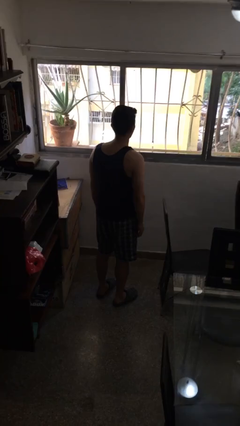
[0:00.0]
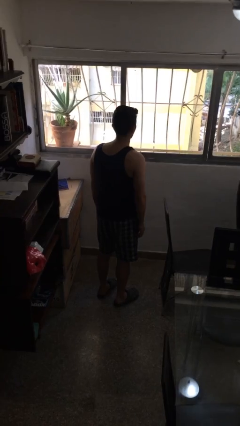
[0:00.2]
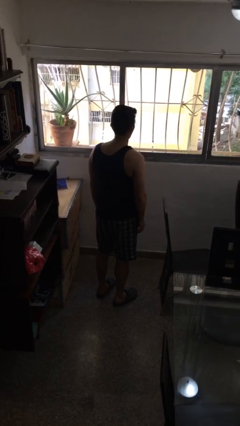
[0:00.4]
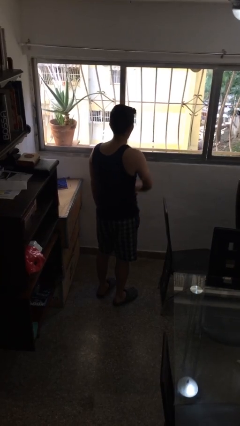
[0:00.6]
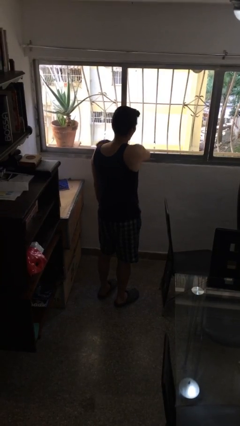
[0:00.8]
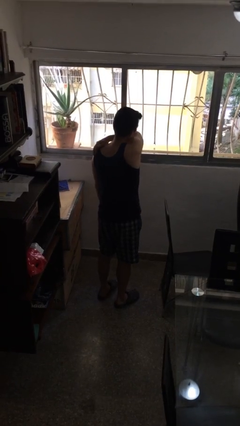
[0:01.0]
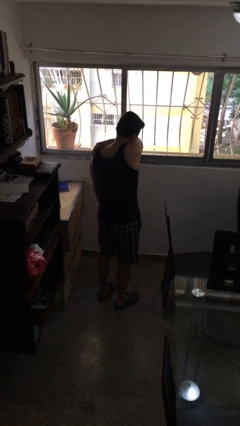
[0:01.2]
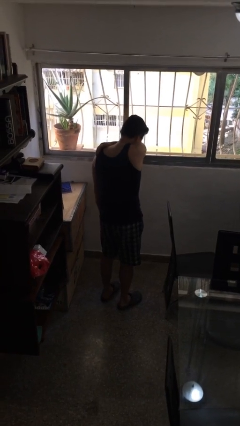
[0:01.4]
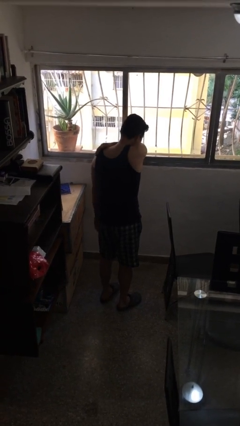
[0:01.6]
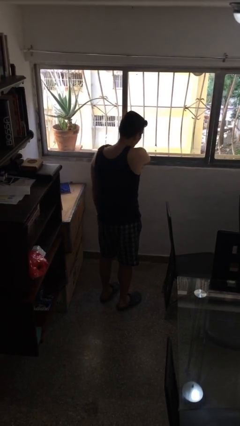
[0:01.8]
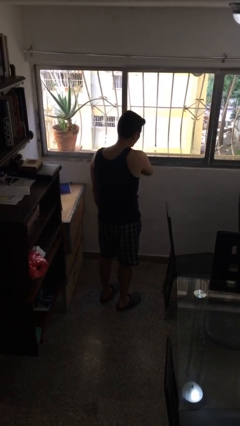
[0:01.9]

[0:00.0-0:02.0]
person sneezes into arm

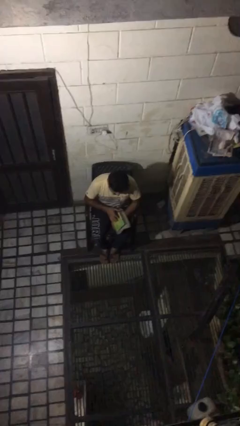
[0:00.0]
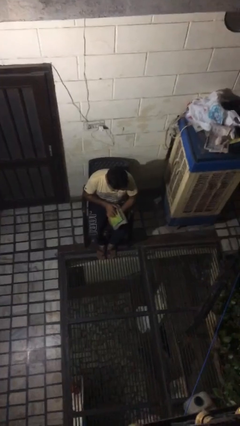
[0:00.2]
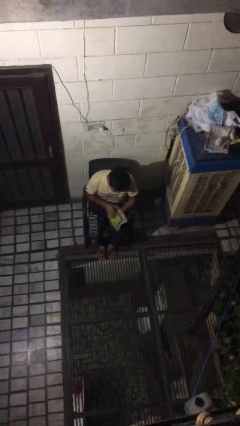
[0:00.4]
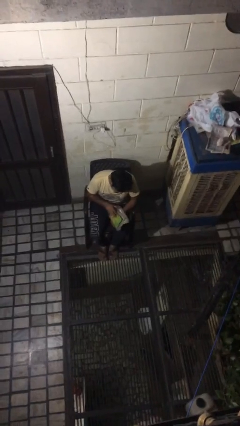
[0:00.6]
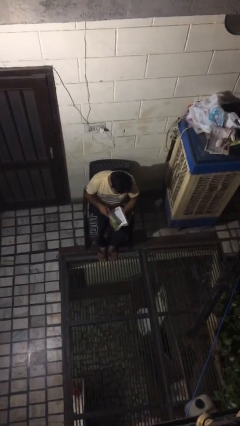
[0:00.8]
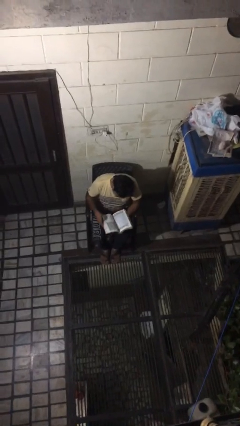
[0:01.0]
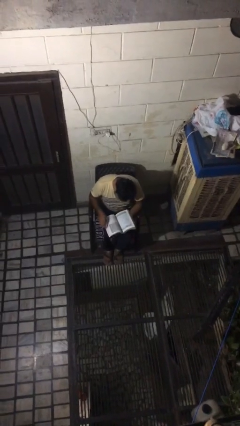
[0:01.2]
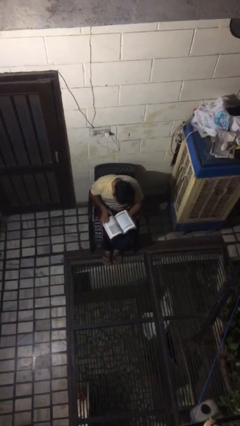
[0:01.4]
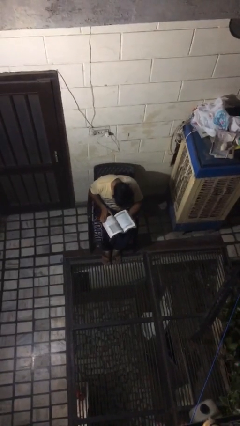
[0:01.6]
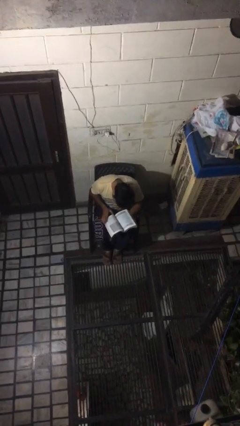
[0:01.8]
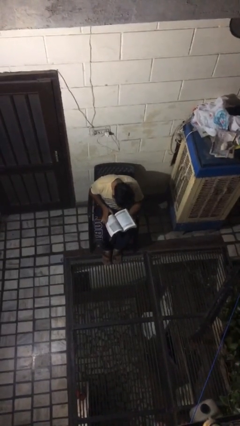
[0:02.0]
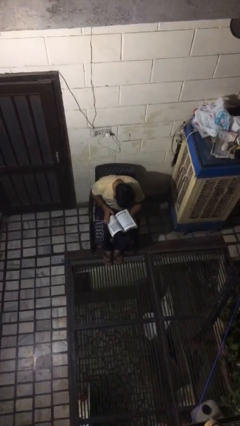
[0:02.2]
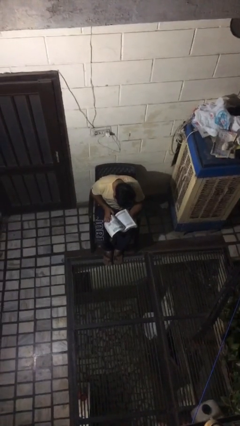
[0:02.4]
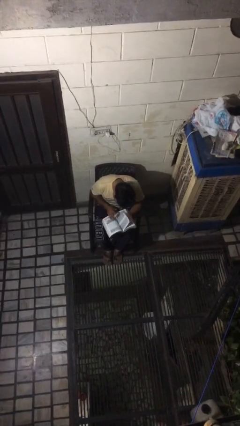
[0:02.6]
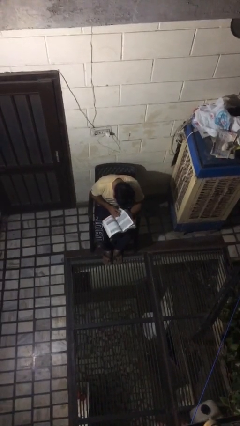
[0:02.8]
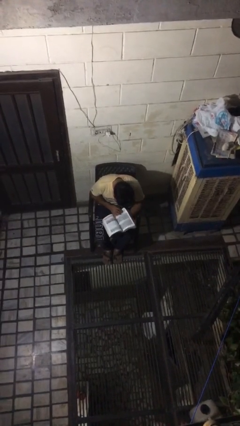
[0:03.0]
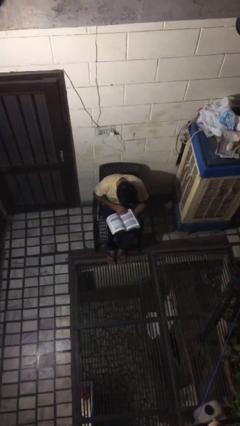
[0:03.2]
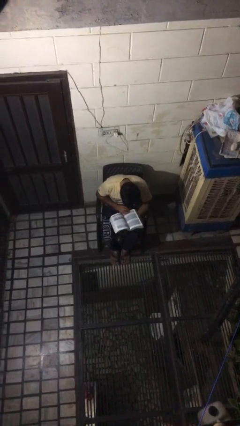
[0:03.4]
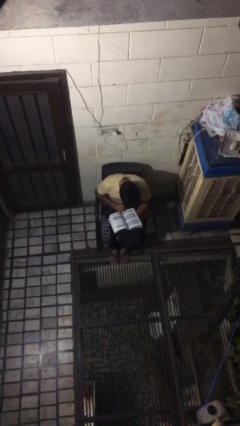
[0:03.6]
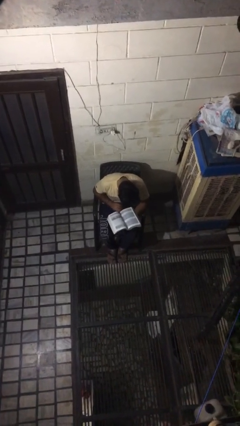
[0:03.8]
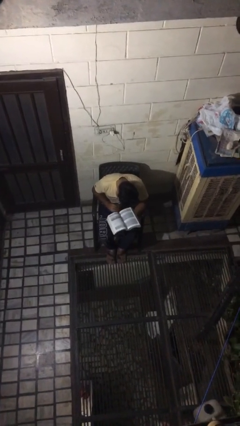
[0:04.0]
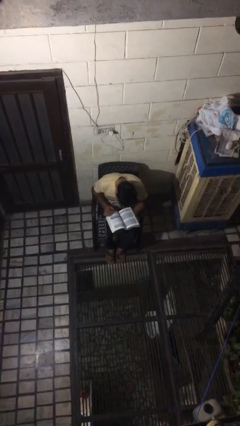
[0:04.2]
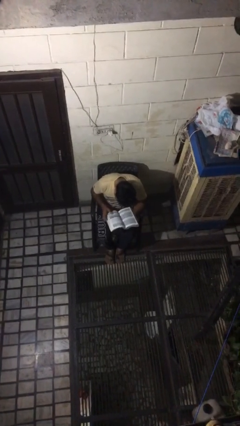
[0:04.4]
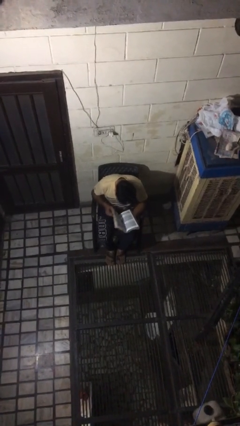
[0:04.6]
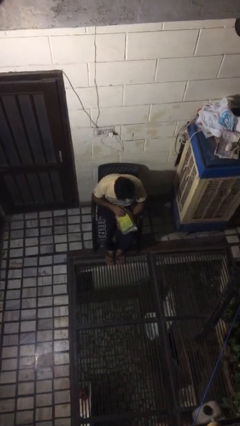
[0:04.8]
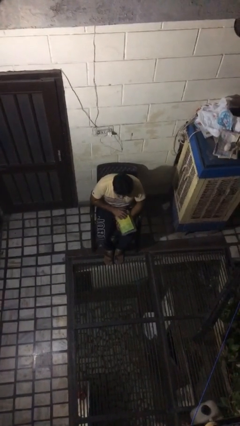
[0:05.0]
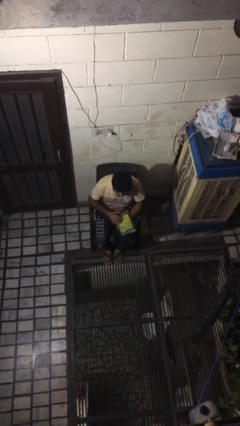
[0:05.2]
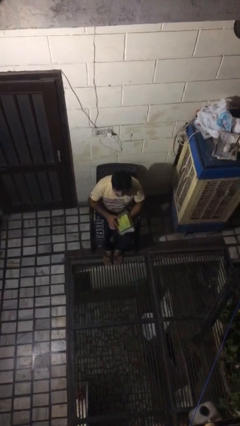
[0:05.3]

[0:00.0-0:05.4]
person reads book

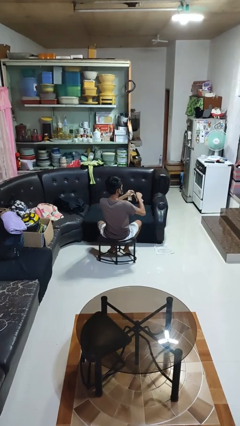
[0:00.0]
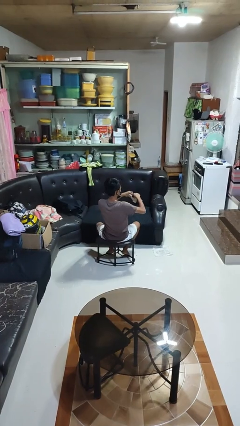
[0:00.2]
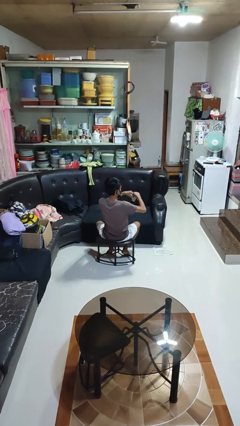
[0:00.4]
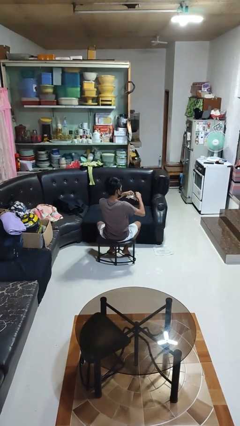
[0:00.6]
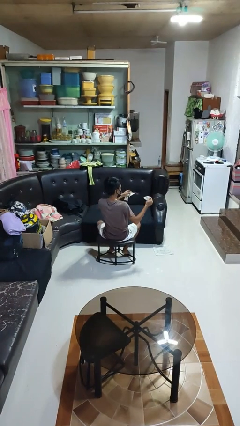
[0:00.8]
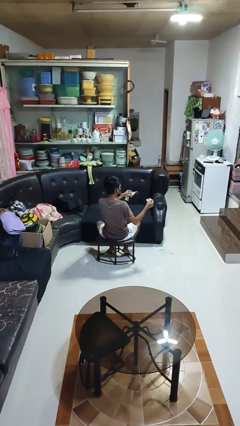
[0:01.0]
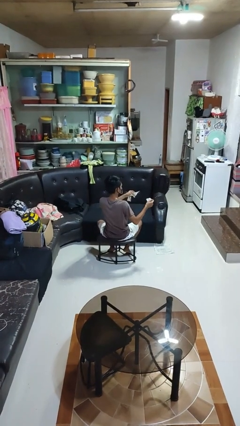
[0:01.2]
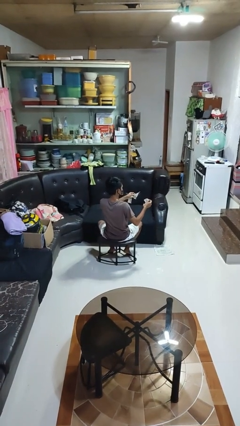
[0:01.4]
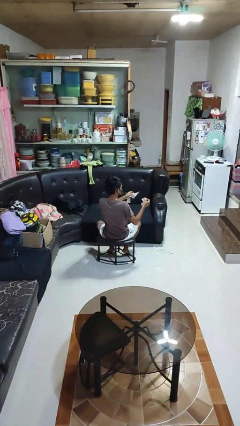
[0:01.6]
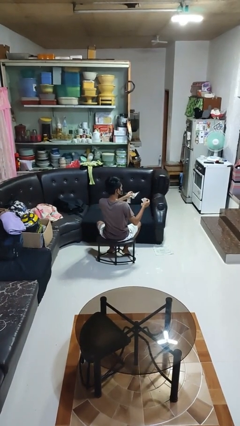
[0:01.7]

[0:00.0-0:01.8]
person tears paper

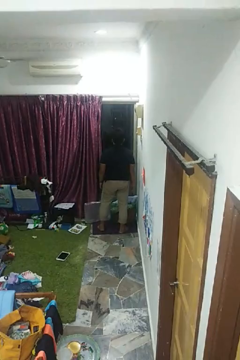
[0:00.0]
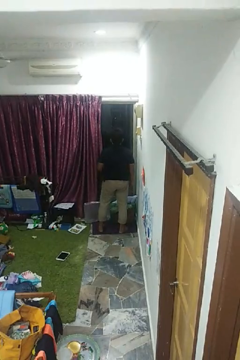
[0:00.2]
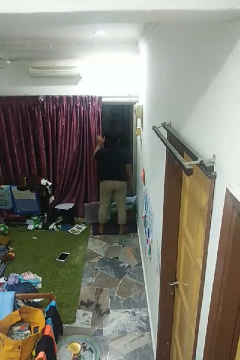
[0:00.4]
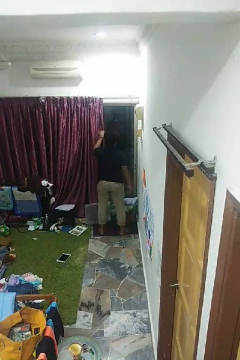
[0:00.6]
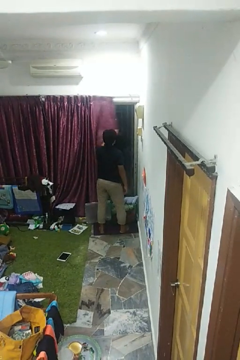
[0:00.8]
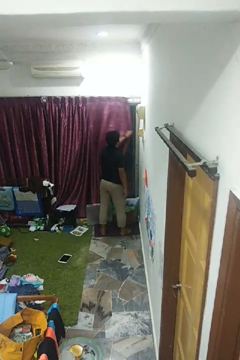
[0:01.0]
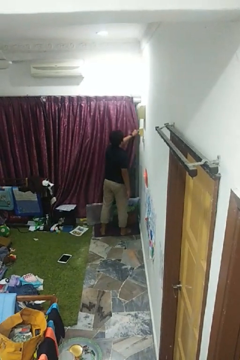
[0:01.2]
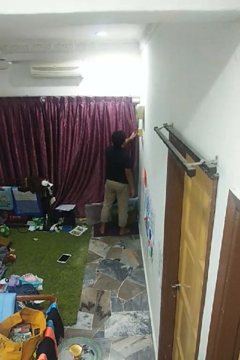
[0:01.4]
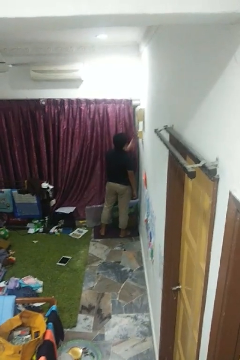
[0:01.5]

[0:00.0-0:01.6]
person closes curtains

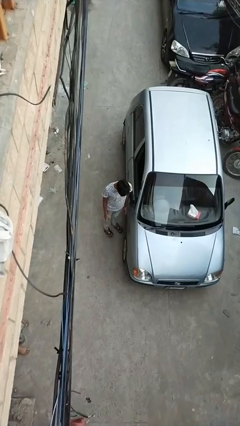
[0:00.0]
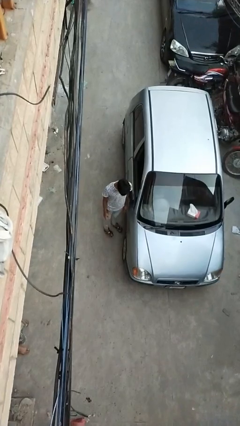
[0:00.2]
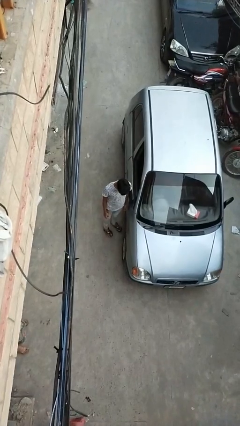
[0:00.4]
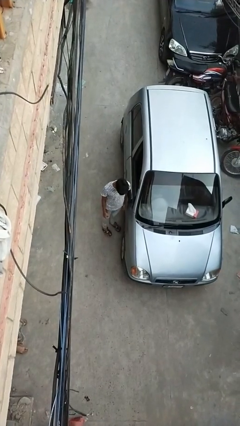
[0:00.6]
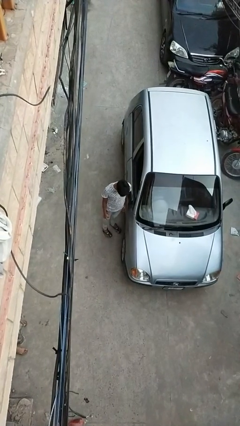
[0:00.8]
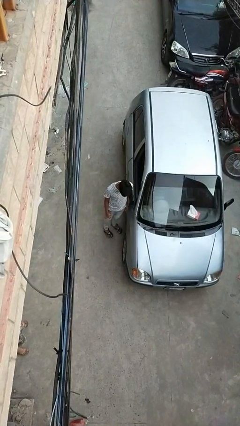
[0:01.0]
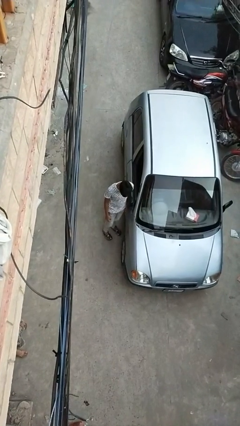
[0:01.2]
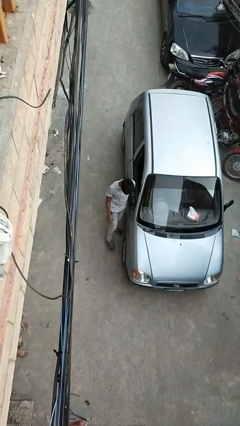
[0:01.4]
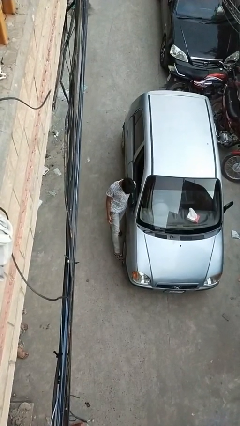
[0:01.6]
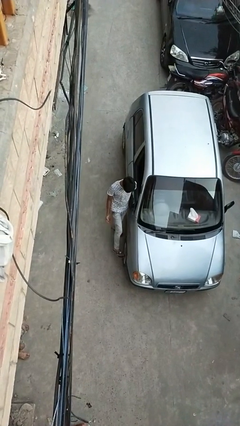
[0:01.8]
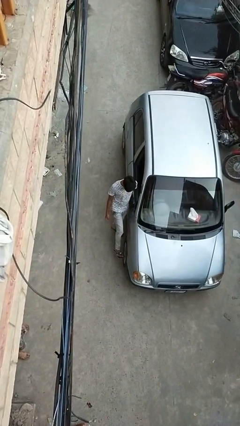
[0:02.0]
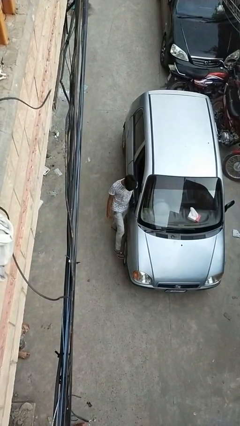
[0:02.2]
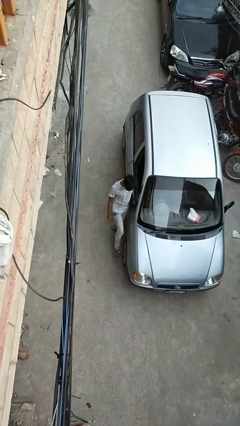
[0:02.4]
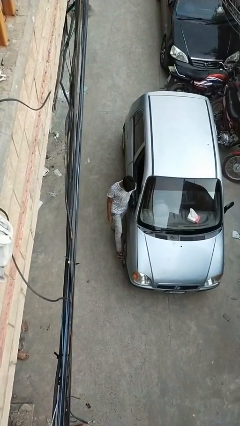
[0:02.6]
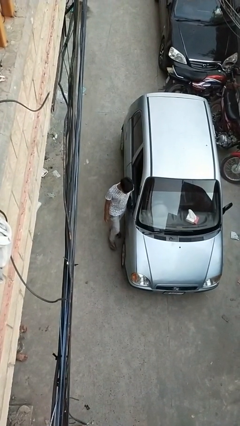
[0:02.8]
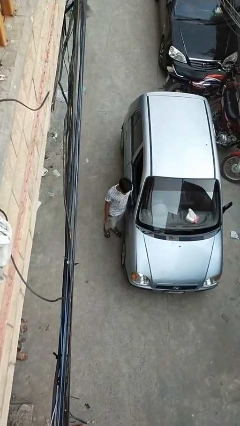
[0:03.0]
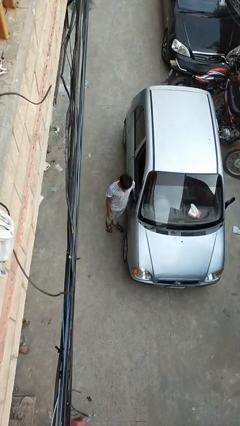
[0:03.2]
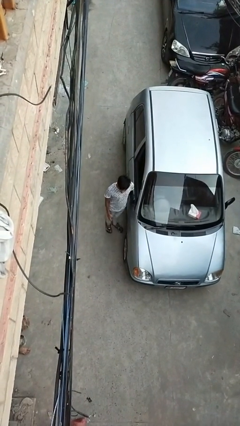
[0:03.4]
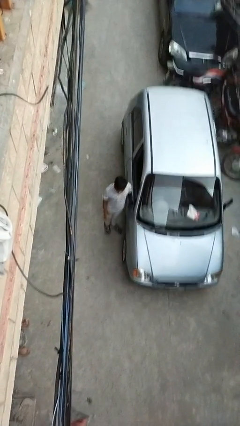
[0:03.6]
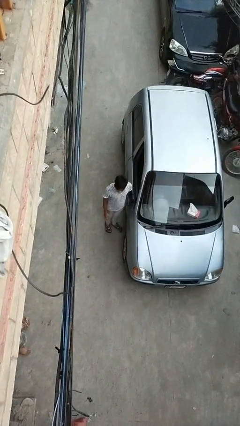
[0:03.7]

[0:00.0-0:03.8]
person kicks car tires

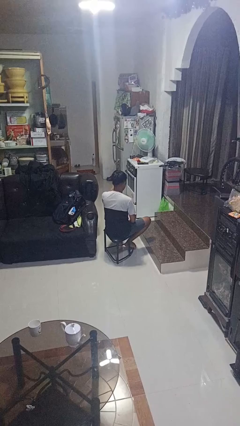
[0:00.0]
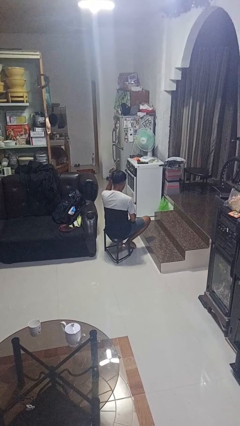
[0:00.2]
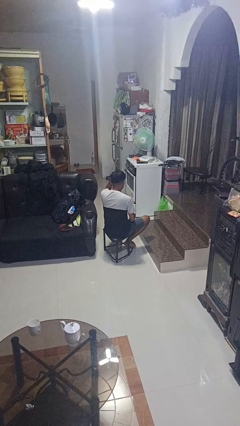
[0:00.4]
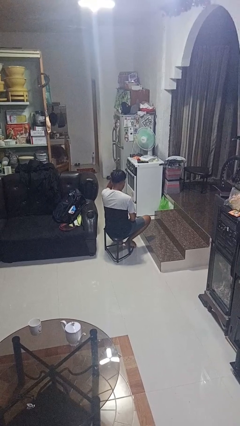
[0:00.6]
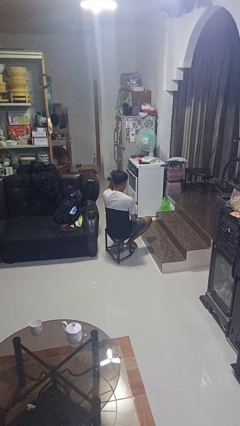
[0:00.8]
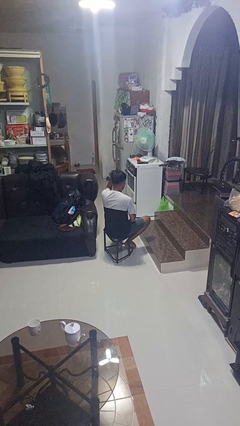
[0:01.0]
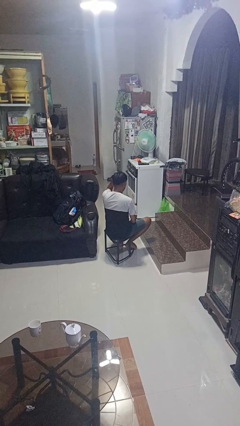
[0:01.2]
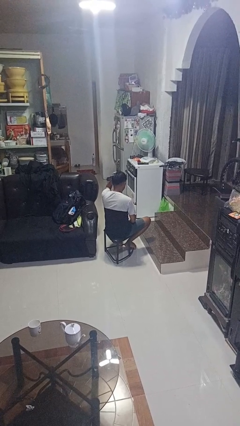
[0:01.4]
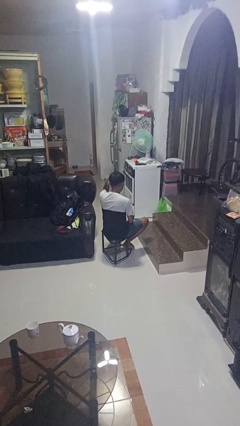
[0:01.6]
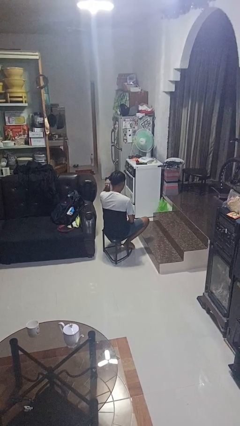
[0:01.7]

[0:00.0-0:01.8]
person pats head

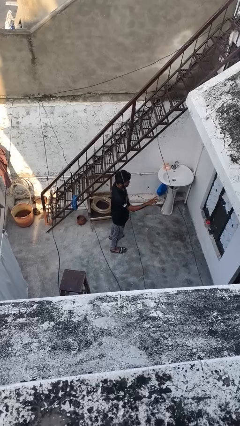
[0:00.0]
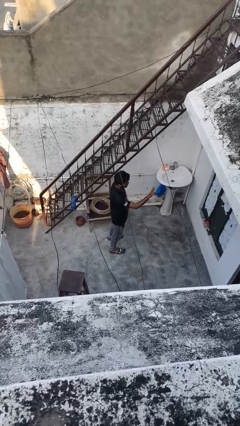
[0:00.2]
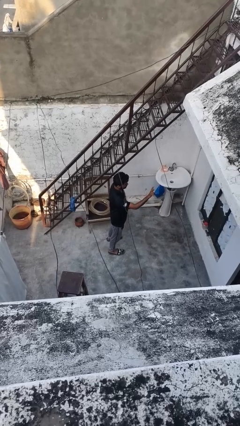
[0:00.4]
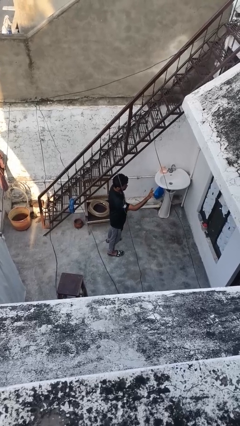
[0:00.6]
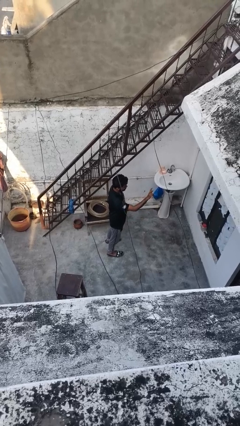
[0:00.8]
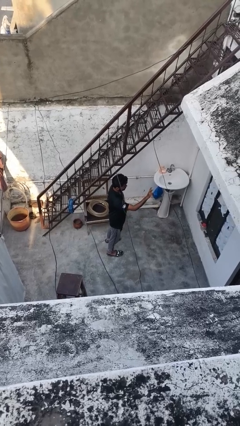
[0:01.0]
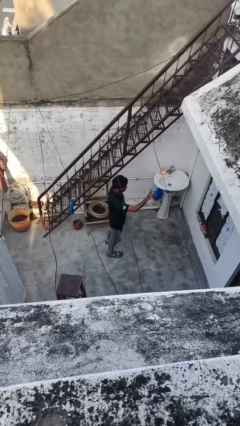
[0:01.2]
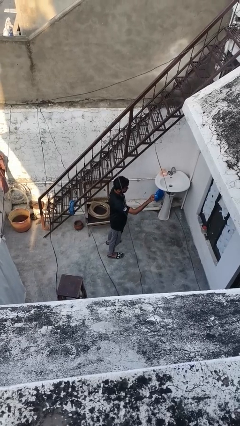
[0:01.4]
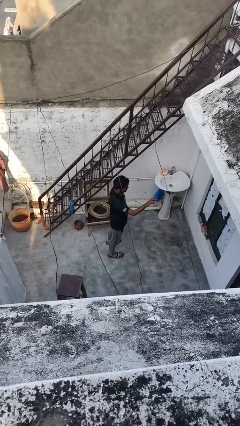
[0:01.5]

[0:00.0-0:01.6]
person gestures peace
